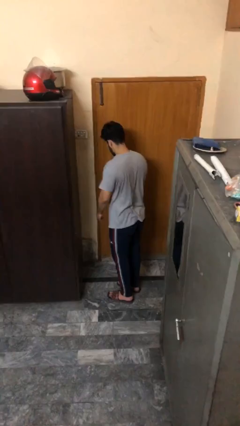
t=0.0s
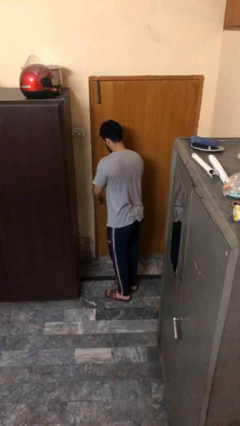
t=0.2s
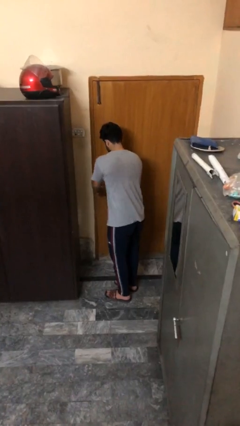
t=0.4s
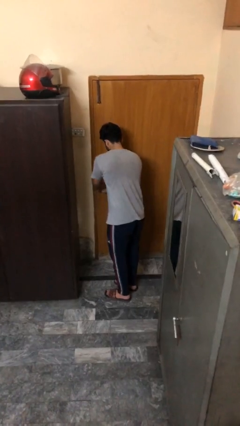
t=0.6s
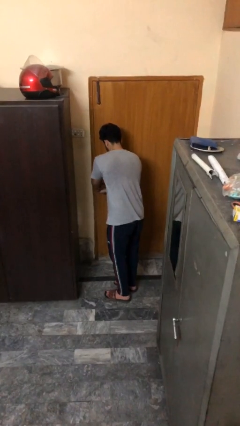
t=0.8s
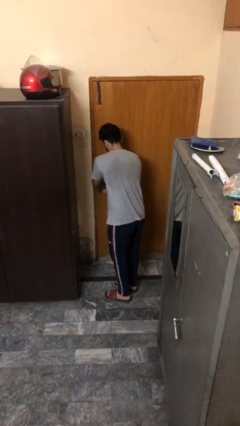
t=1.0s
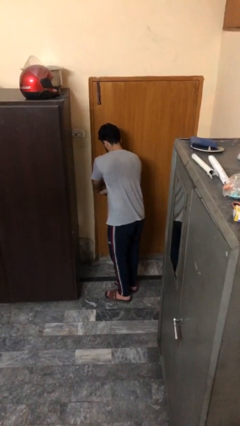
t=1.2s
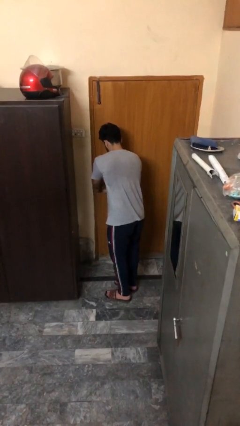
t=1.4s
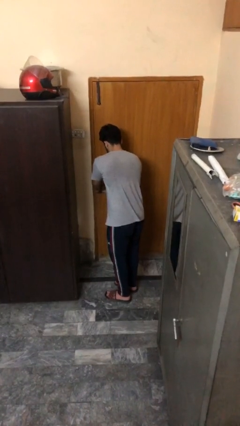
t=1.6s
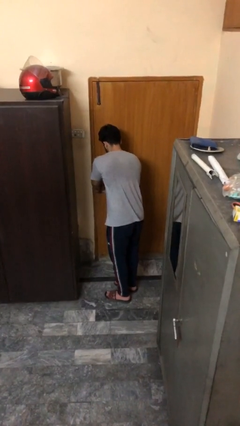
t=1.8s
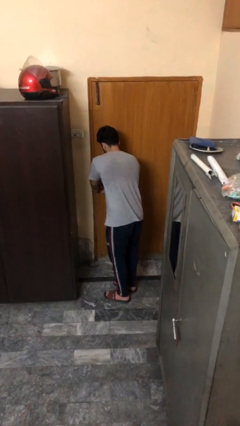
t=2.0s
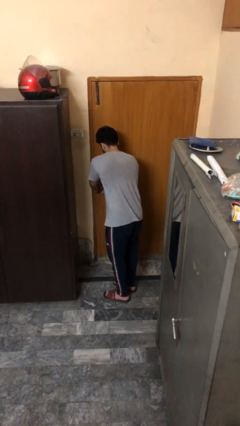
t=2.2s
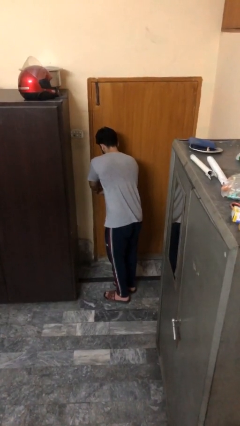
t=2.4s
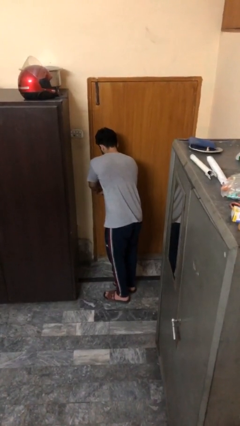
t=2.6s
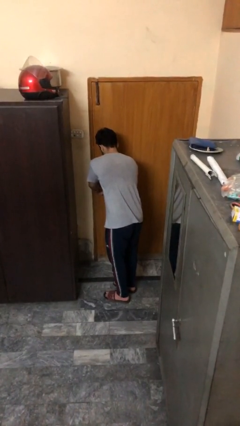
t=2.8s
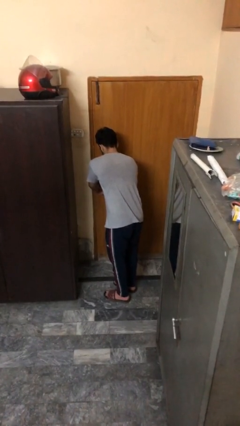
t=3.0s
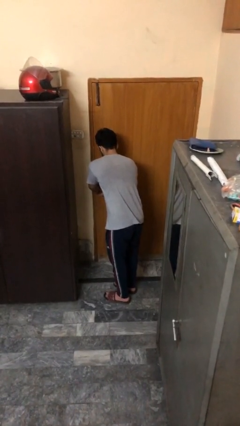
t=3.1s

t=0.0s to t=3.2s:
person locks door with keys

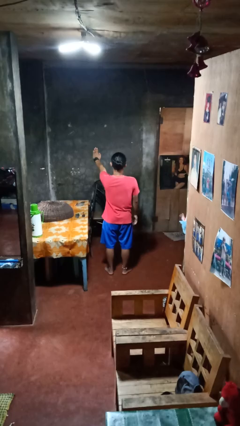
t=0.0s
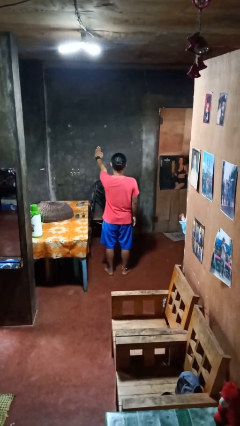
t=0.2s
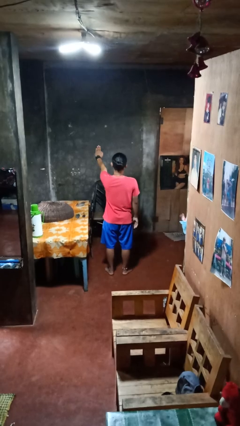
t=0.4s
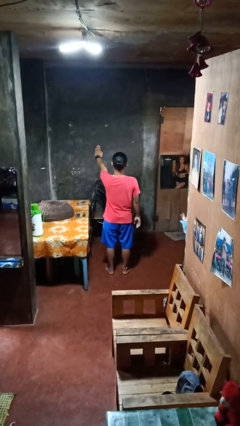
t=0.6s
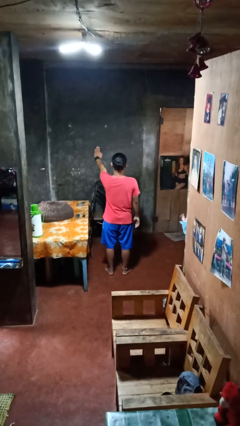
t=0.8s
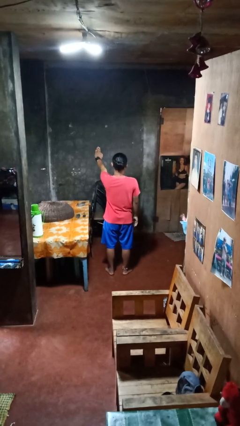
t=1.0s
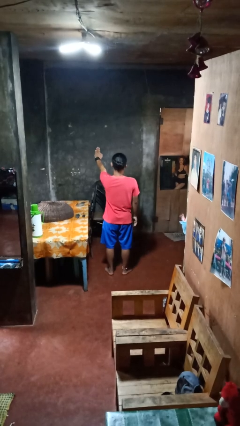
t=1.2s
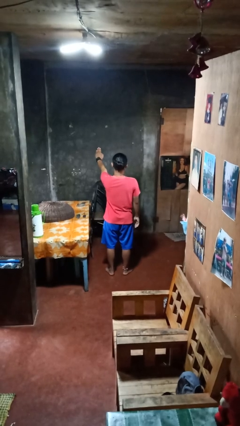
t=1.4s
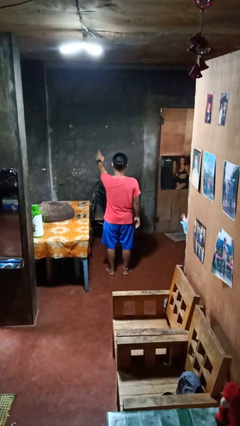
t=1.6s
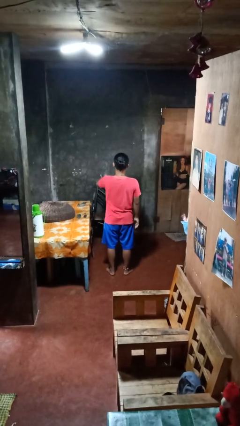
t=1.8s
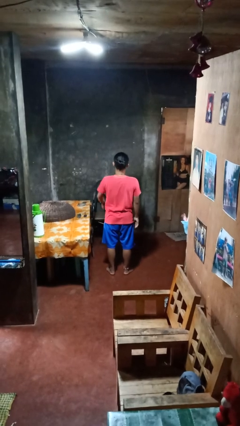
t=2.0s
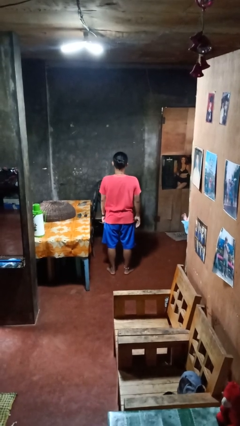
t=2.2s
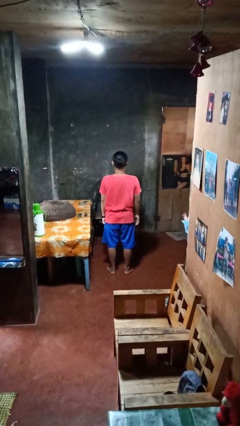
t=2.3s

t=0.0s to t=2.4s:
person gestures stop

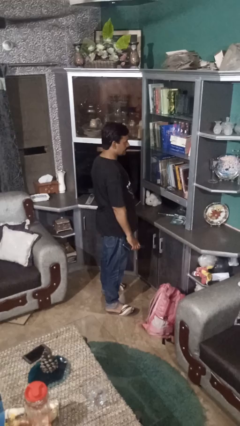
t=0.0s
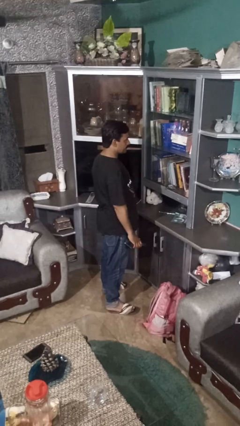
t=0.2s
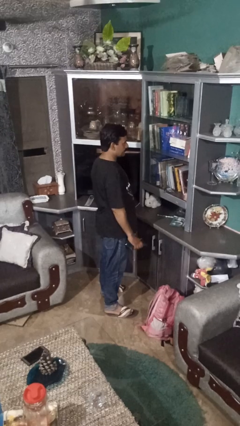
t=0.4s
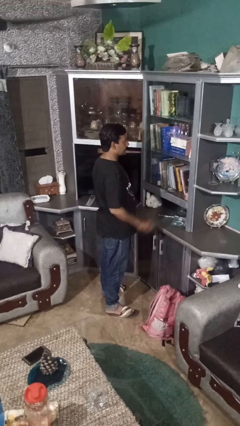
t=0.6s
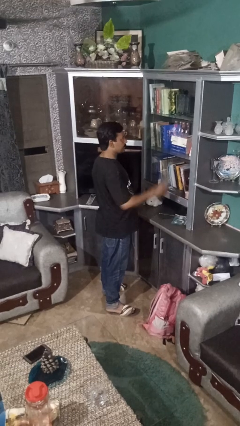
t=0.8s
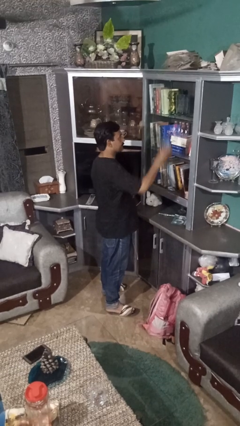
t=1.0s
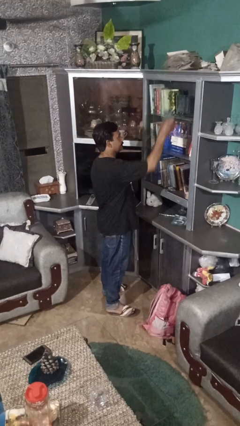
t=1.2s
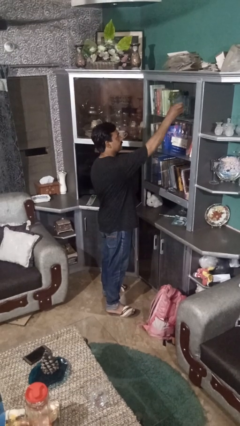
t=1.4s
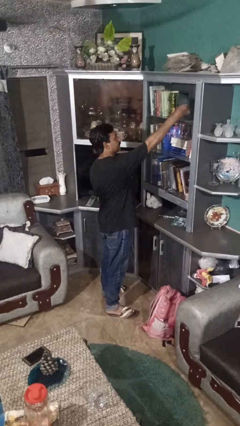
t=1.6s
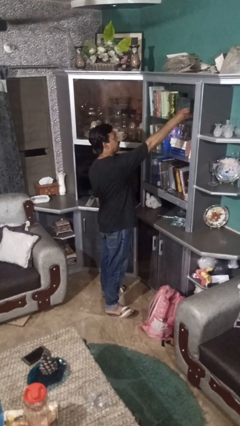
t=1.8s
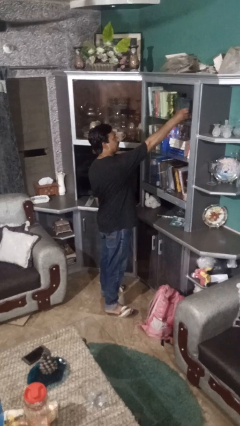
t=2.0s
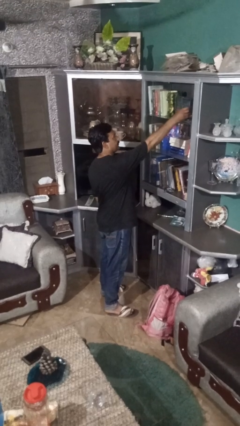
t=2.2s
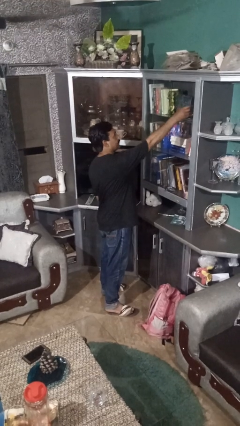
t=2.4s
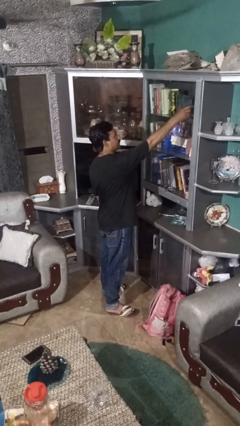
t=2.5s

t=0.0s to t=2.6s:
person puts down object on shelf

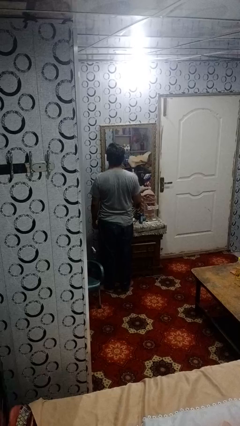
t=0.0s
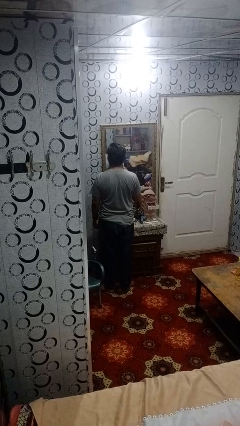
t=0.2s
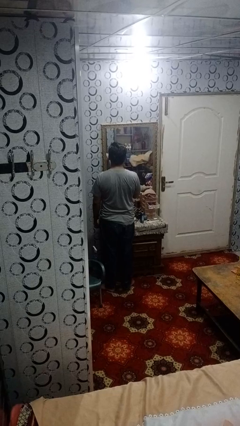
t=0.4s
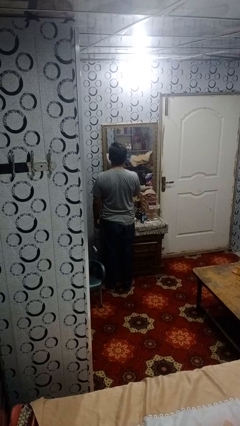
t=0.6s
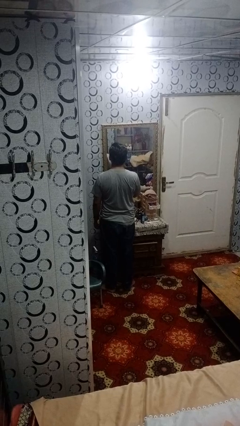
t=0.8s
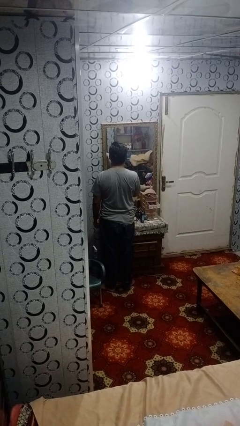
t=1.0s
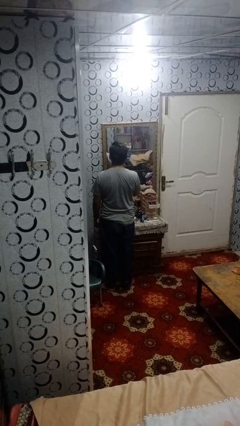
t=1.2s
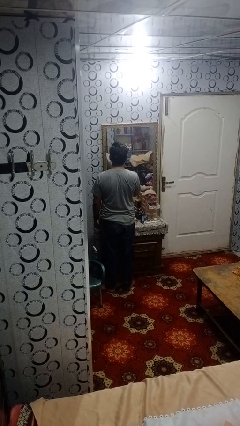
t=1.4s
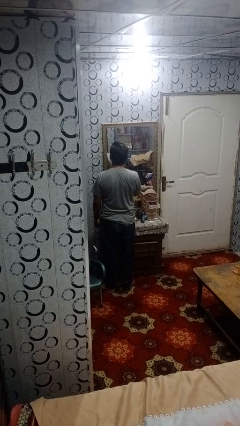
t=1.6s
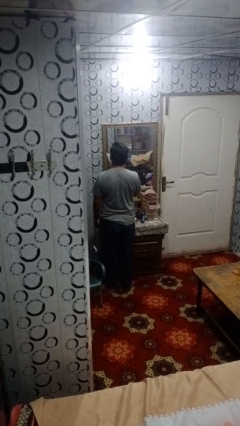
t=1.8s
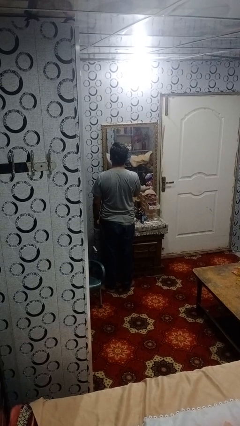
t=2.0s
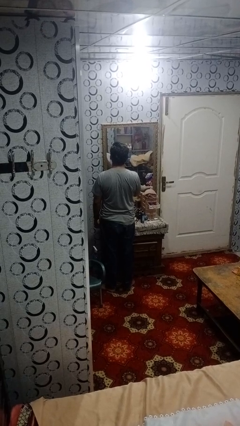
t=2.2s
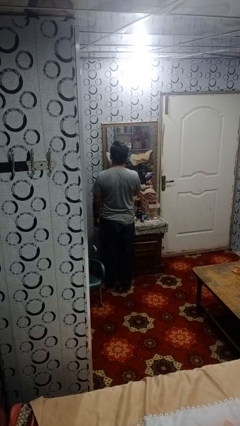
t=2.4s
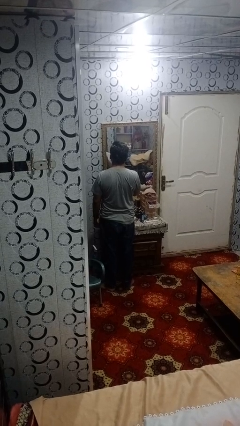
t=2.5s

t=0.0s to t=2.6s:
person applies lip makeup

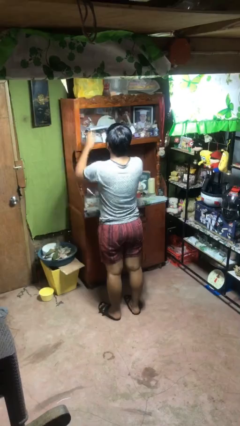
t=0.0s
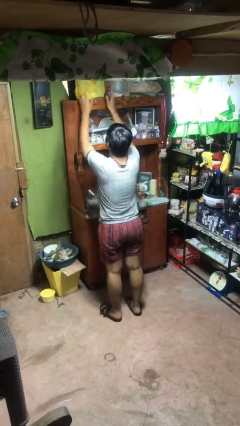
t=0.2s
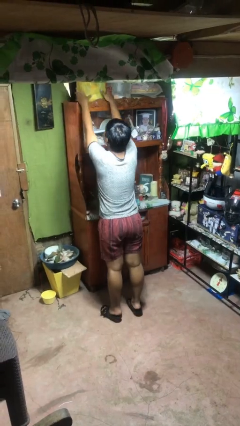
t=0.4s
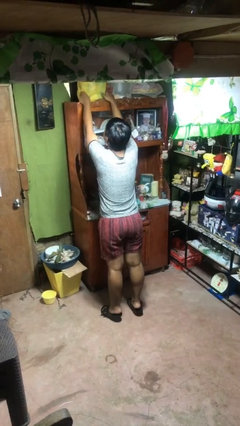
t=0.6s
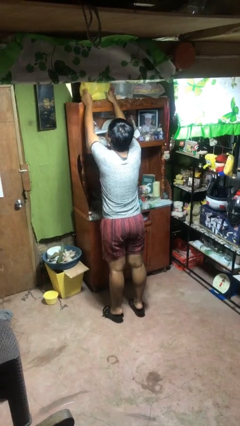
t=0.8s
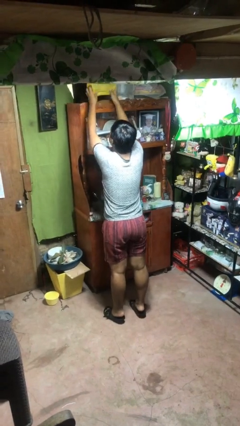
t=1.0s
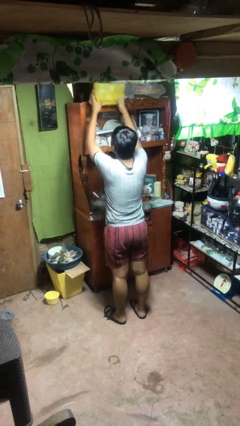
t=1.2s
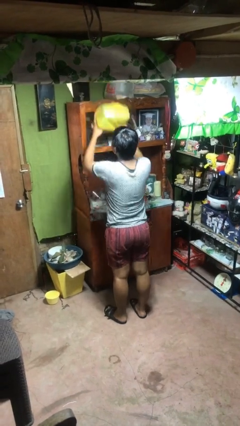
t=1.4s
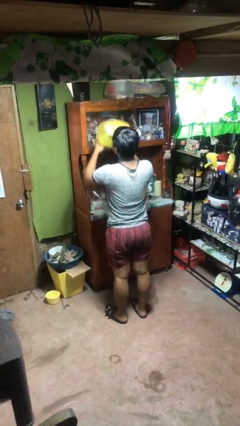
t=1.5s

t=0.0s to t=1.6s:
person picks up object from shelf

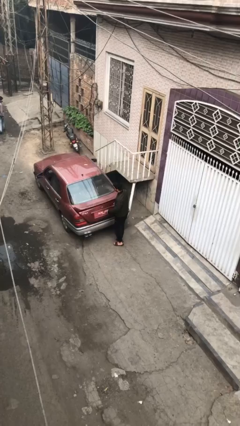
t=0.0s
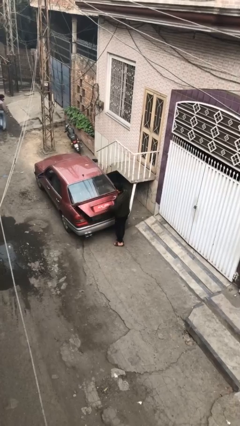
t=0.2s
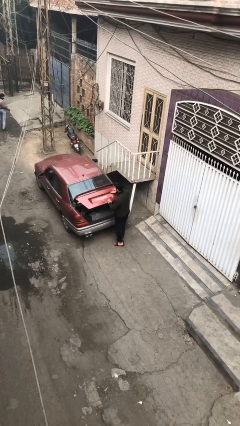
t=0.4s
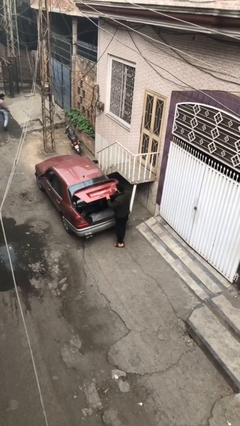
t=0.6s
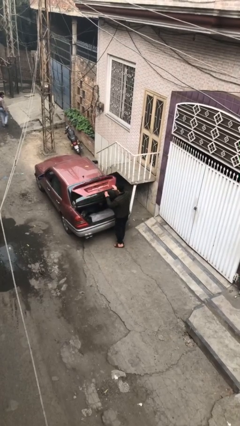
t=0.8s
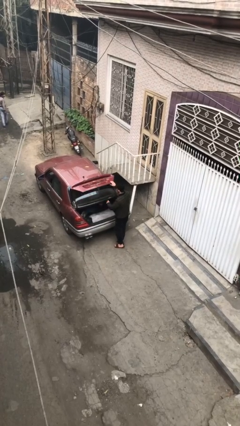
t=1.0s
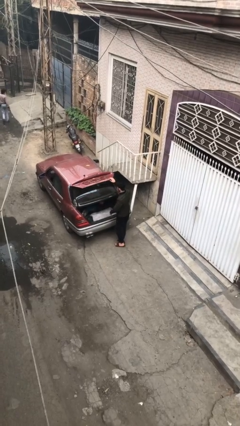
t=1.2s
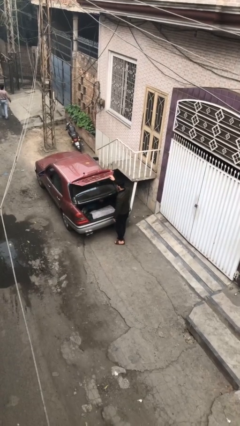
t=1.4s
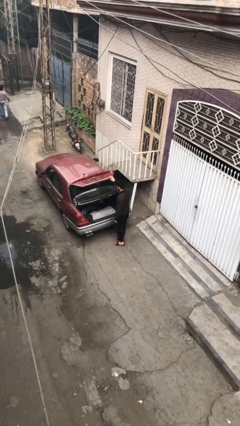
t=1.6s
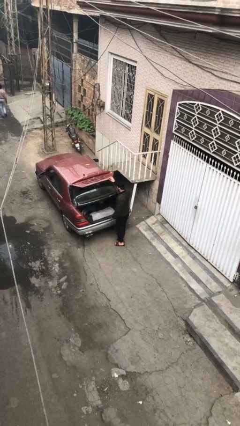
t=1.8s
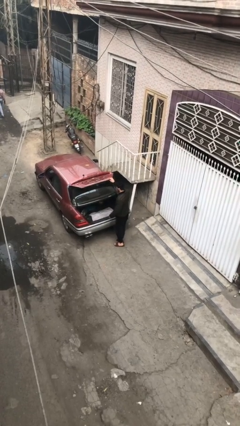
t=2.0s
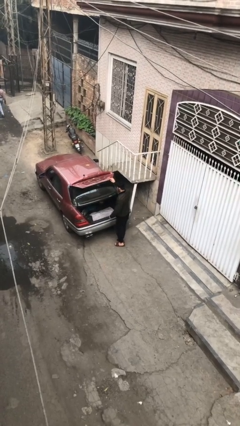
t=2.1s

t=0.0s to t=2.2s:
person opens car trunk

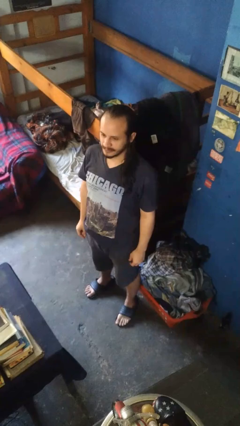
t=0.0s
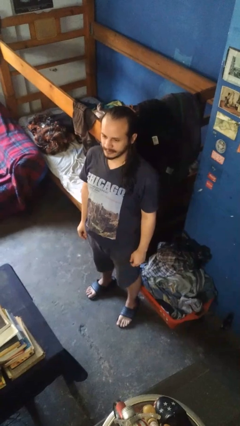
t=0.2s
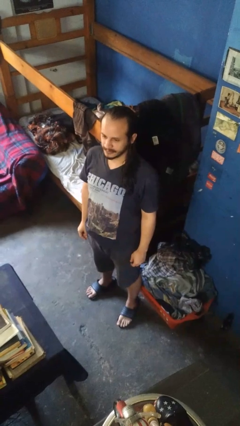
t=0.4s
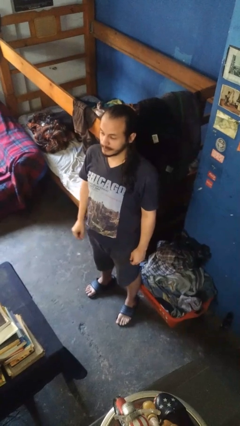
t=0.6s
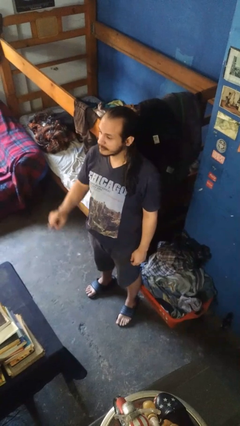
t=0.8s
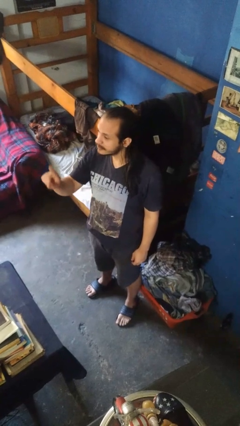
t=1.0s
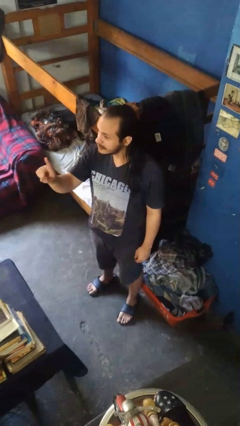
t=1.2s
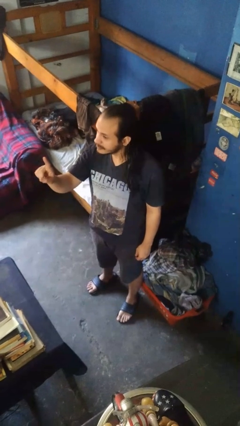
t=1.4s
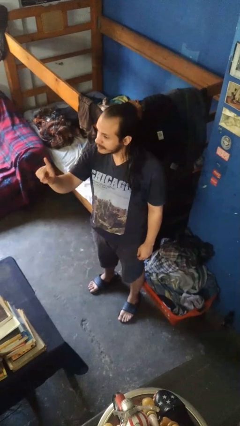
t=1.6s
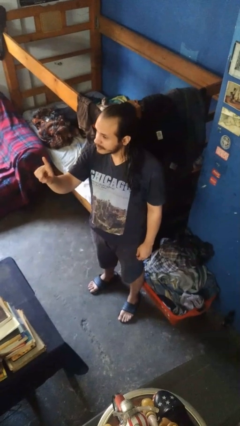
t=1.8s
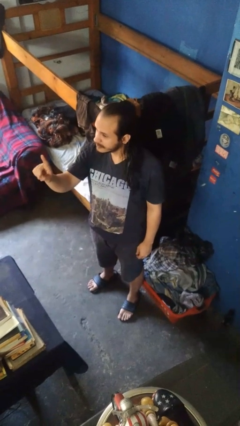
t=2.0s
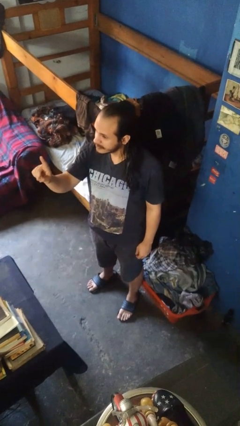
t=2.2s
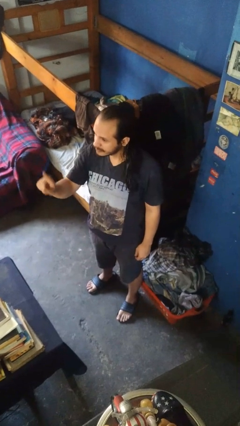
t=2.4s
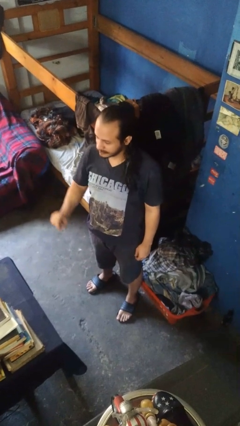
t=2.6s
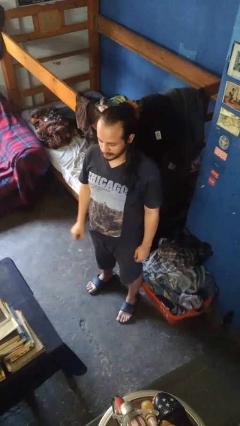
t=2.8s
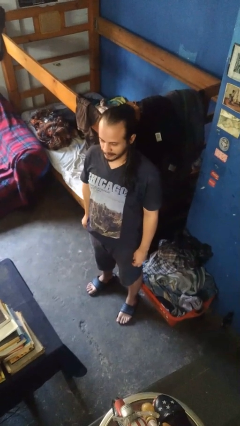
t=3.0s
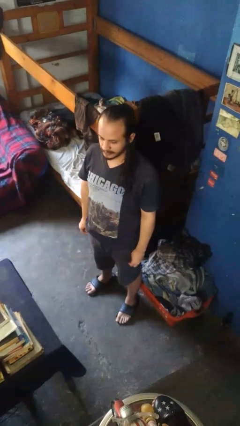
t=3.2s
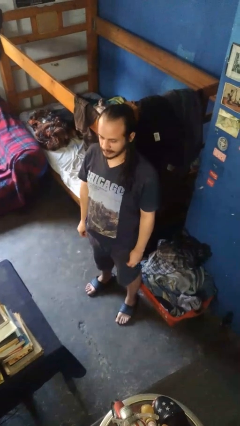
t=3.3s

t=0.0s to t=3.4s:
person gestures number one
